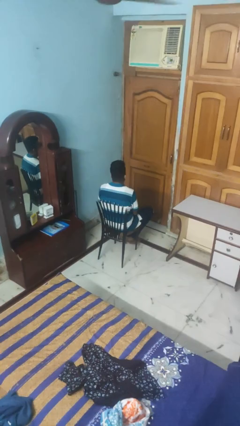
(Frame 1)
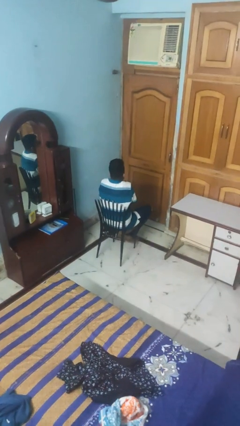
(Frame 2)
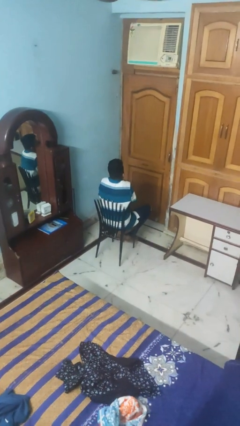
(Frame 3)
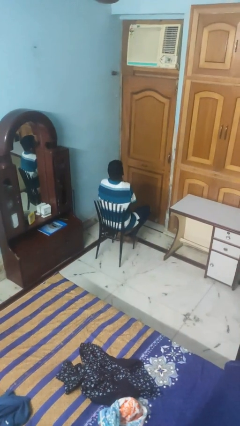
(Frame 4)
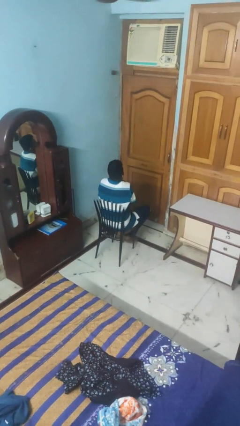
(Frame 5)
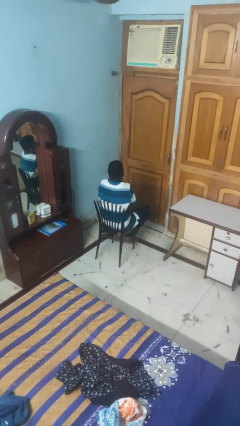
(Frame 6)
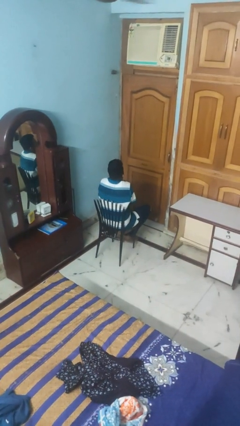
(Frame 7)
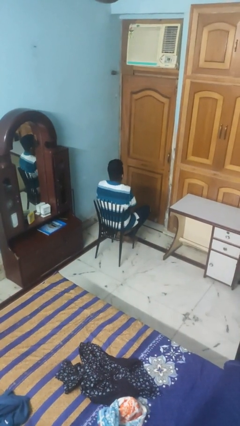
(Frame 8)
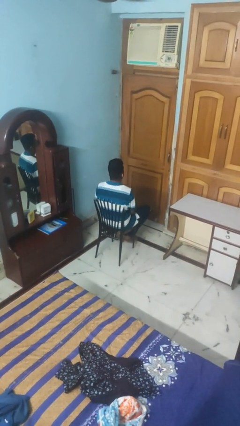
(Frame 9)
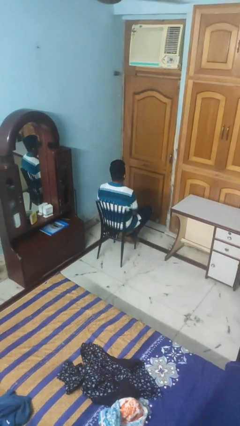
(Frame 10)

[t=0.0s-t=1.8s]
person shrugs

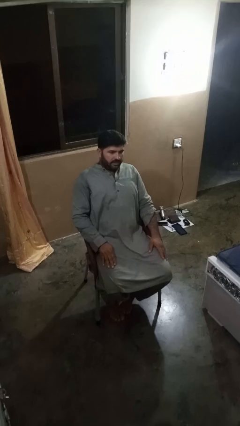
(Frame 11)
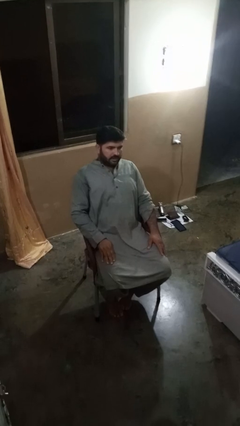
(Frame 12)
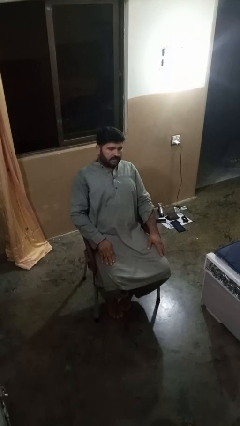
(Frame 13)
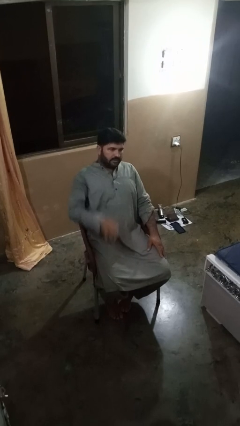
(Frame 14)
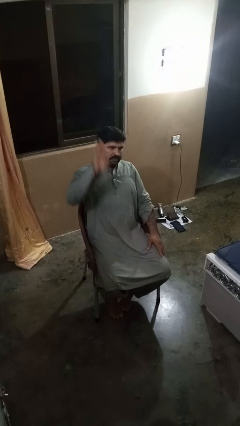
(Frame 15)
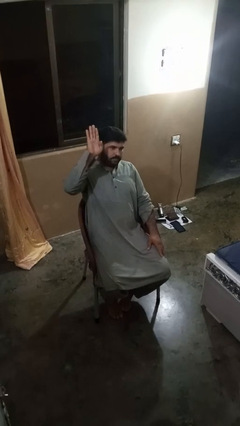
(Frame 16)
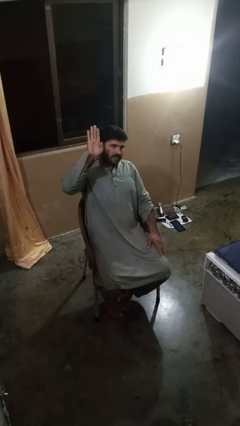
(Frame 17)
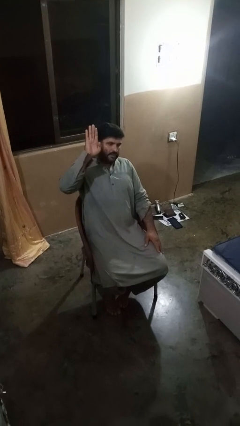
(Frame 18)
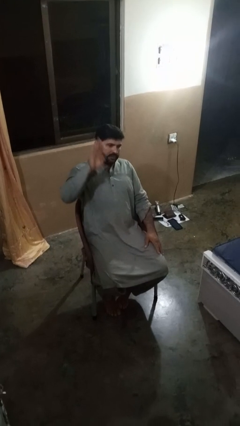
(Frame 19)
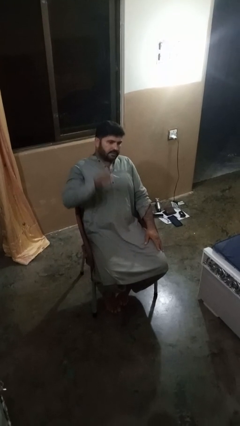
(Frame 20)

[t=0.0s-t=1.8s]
person gestures number four

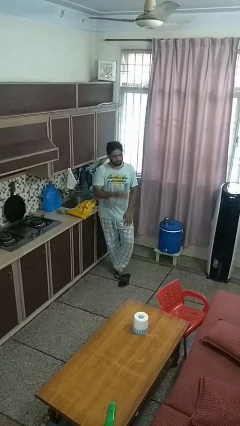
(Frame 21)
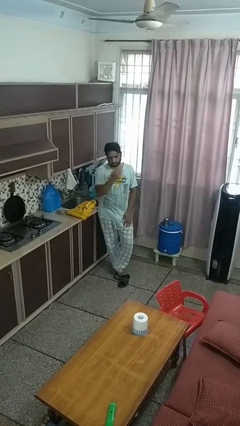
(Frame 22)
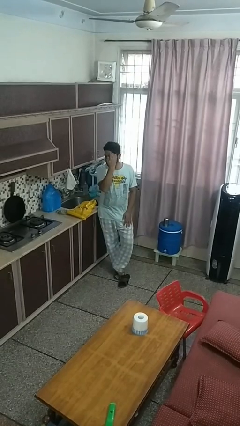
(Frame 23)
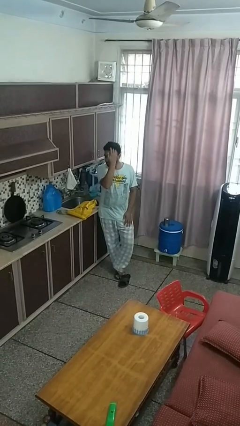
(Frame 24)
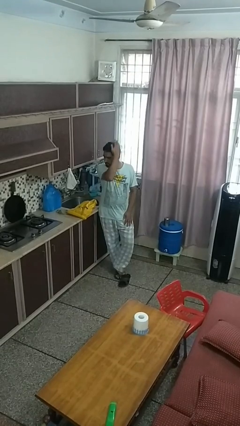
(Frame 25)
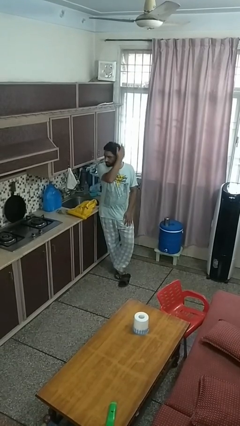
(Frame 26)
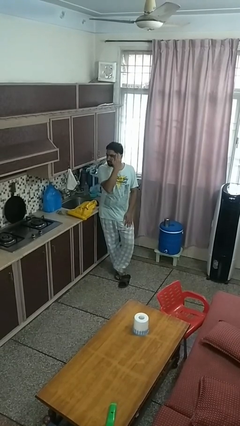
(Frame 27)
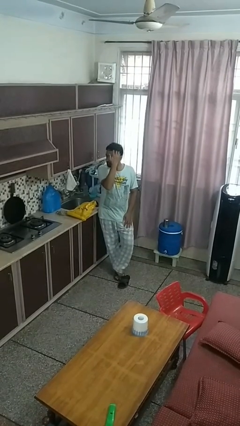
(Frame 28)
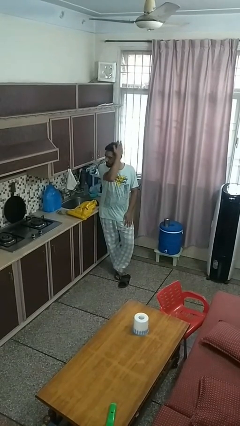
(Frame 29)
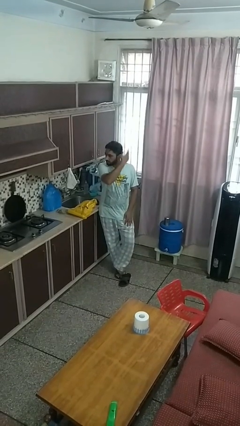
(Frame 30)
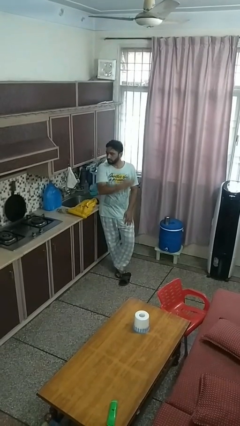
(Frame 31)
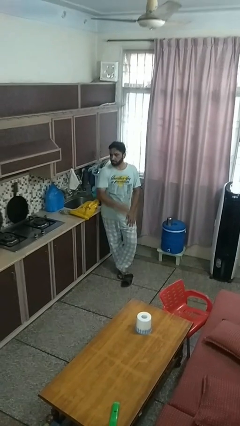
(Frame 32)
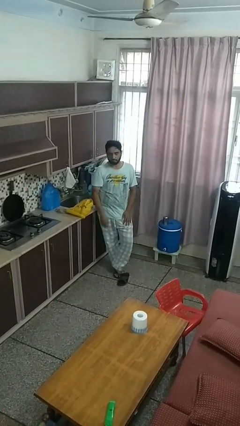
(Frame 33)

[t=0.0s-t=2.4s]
person strokes hair

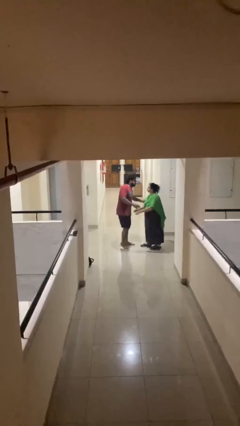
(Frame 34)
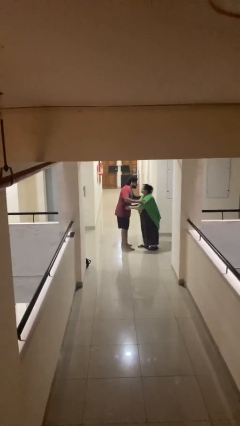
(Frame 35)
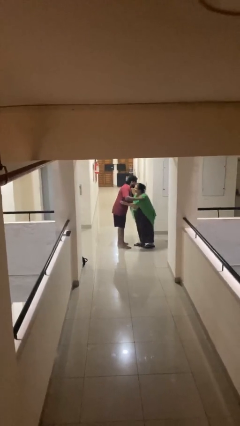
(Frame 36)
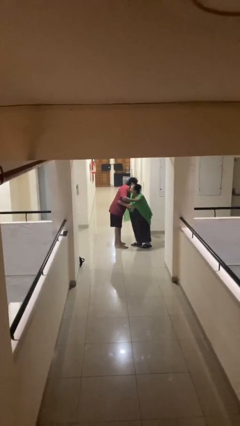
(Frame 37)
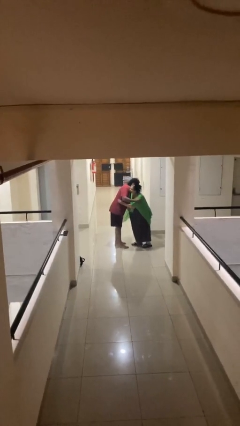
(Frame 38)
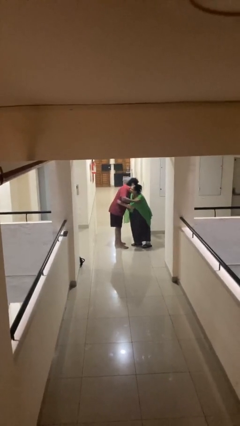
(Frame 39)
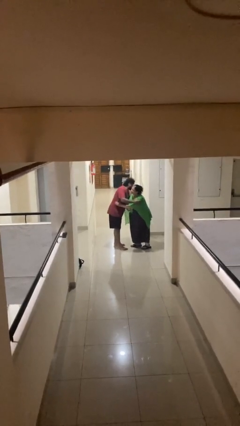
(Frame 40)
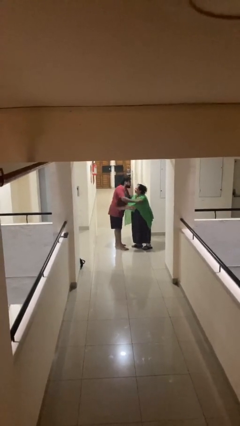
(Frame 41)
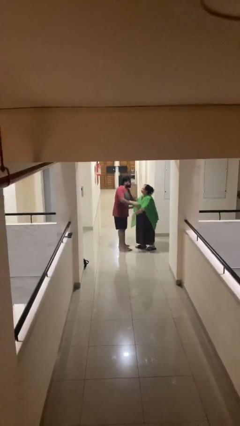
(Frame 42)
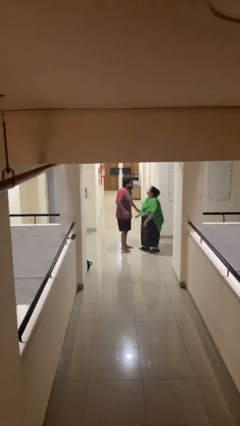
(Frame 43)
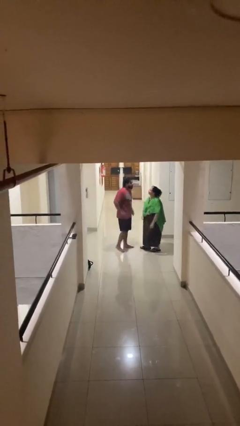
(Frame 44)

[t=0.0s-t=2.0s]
person embraces person

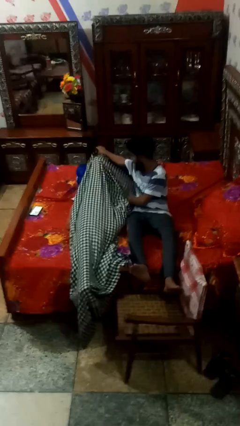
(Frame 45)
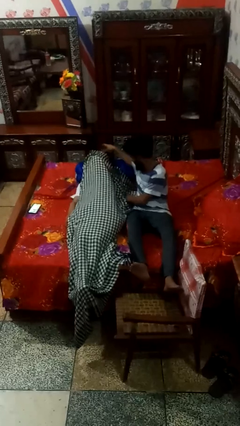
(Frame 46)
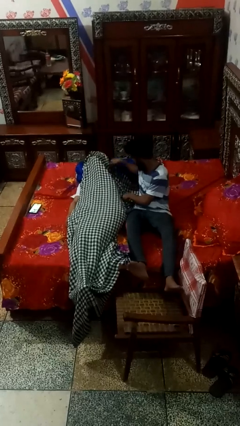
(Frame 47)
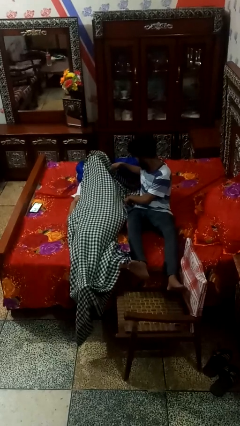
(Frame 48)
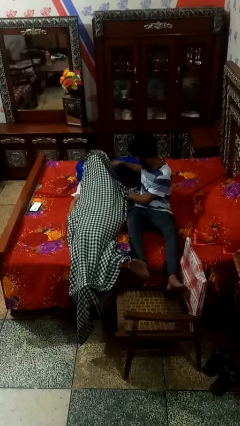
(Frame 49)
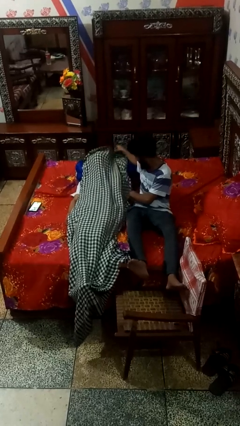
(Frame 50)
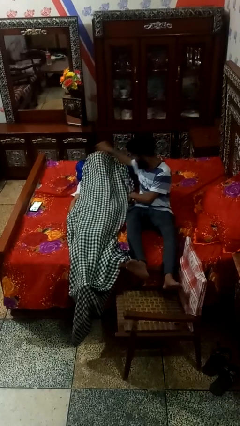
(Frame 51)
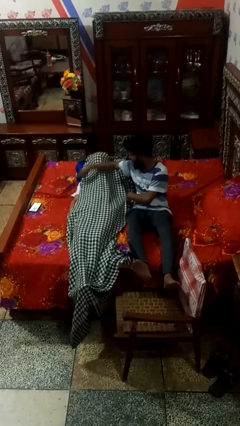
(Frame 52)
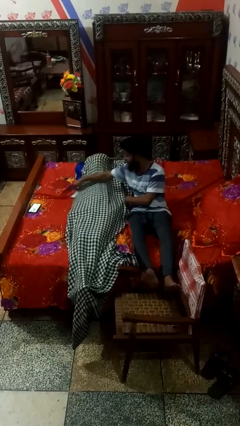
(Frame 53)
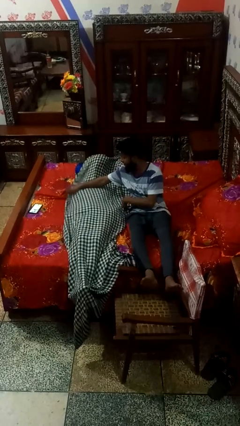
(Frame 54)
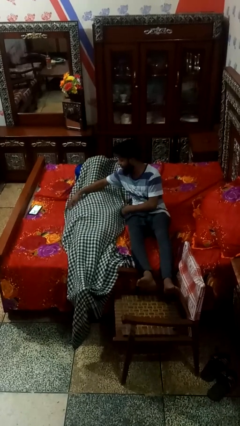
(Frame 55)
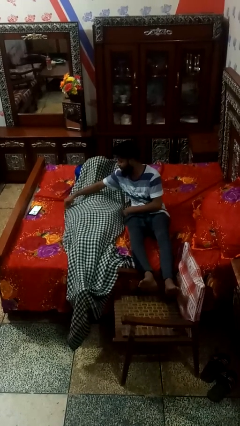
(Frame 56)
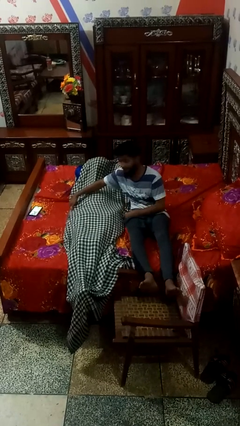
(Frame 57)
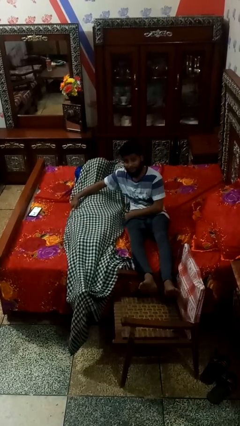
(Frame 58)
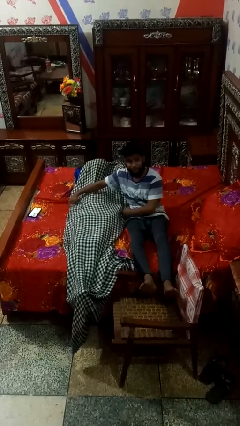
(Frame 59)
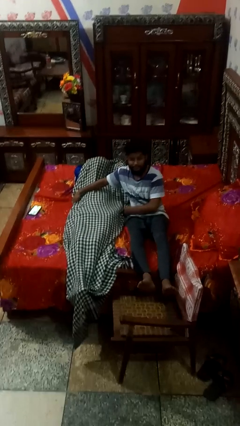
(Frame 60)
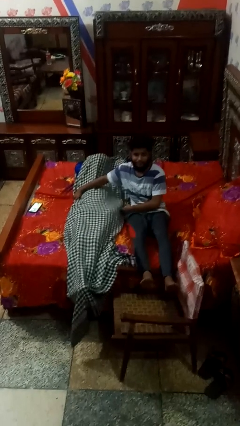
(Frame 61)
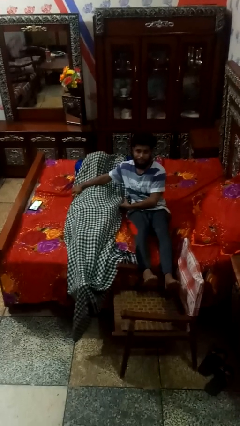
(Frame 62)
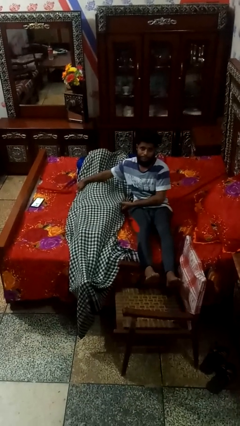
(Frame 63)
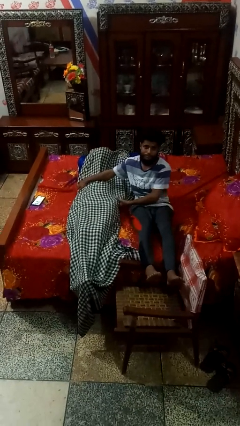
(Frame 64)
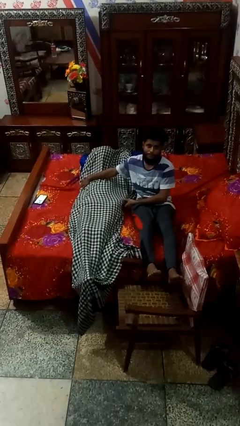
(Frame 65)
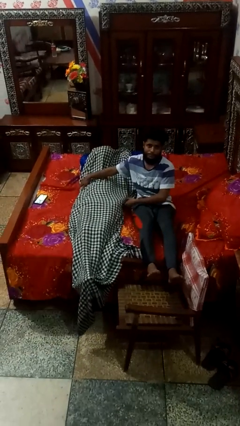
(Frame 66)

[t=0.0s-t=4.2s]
person covers friend with blanket

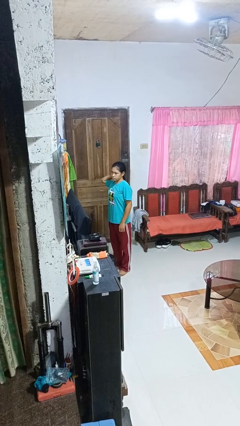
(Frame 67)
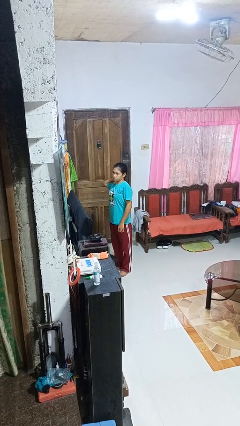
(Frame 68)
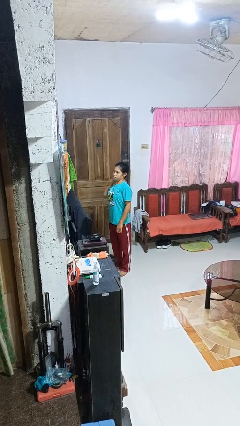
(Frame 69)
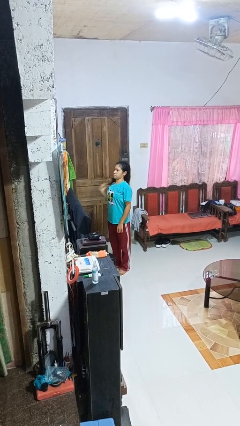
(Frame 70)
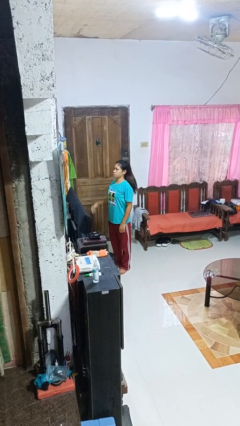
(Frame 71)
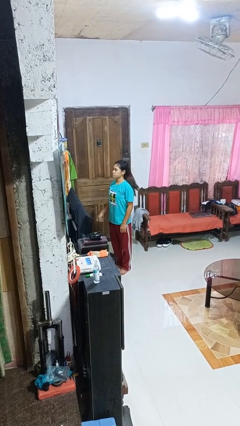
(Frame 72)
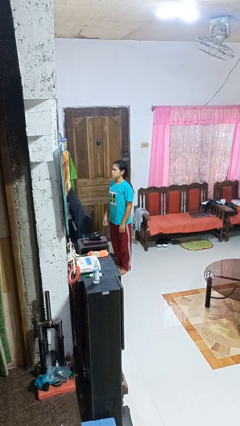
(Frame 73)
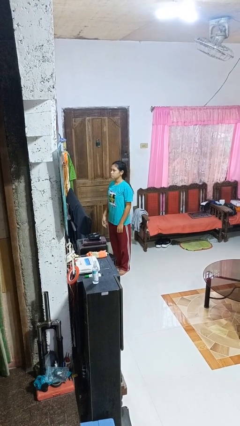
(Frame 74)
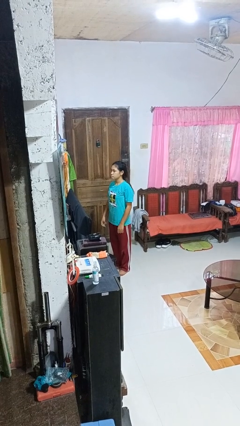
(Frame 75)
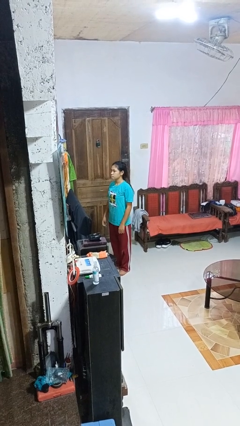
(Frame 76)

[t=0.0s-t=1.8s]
person takes off hairtie

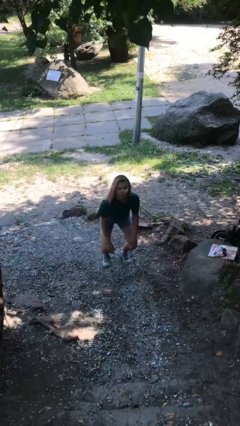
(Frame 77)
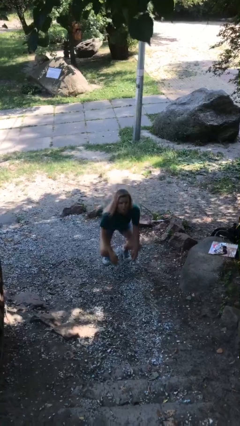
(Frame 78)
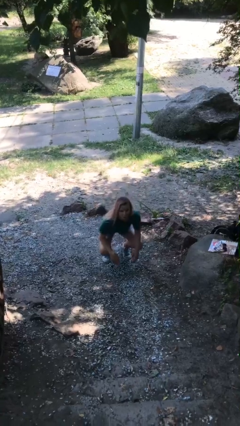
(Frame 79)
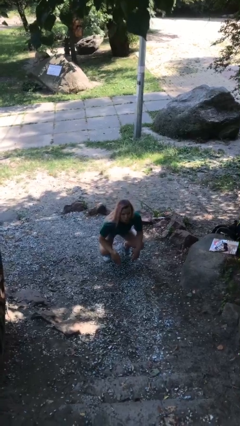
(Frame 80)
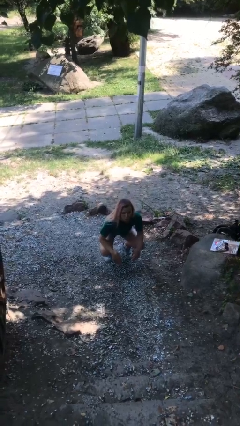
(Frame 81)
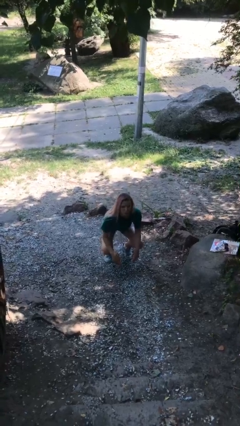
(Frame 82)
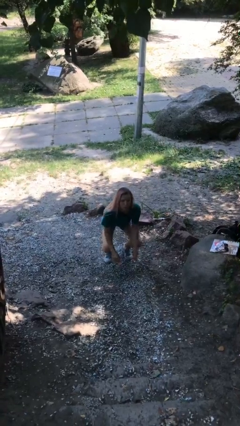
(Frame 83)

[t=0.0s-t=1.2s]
person squats

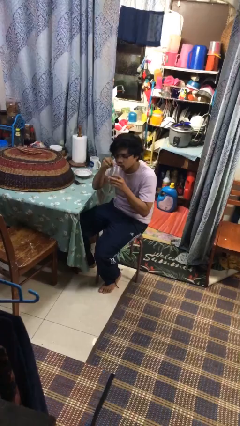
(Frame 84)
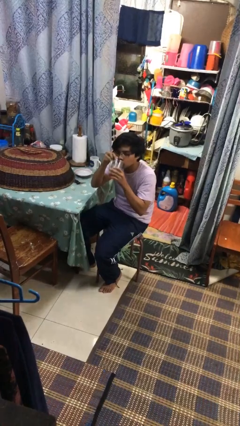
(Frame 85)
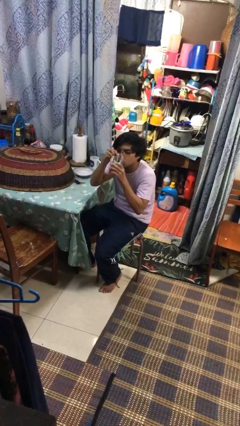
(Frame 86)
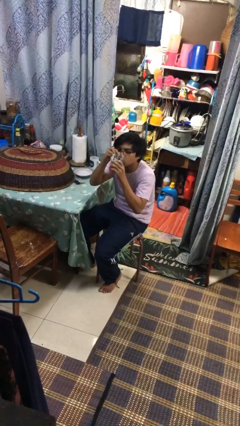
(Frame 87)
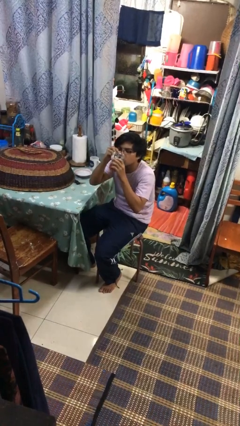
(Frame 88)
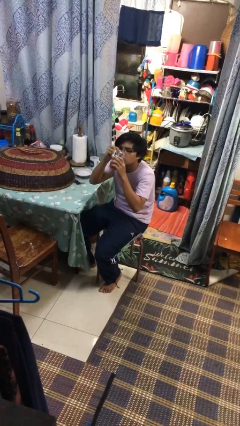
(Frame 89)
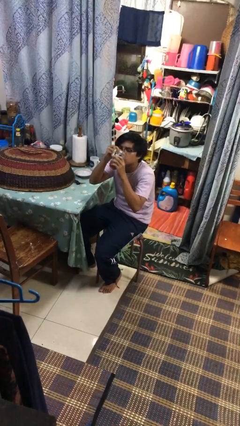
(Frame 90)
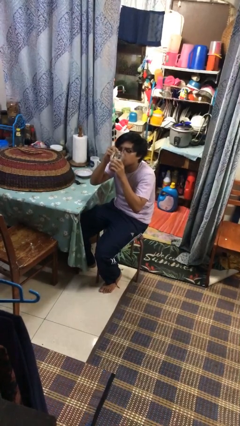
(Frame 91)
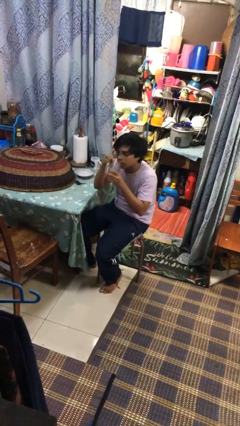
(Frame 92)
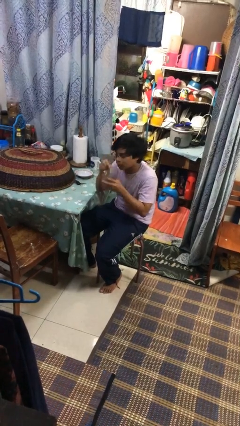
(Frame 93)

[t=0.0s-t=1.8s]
person drinks from mug
